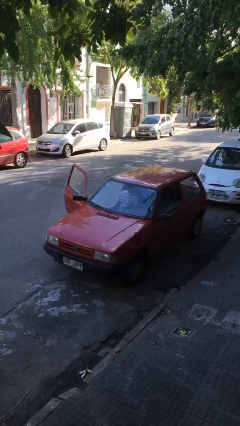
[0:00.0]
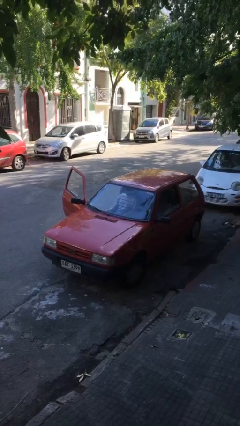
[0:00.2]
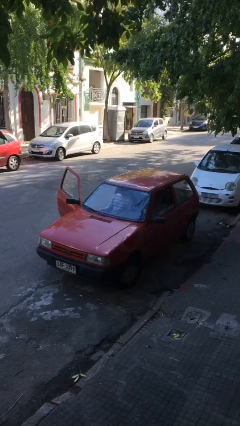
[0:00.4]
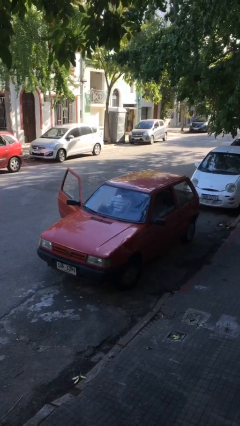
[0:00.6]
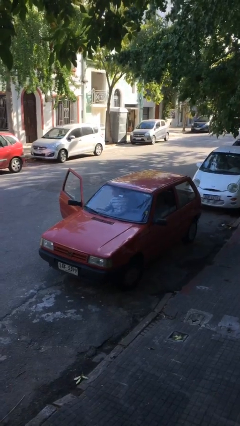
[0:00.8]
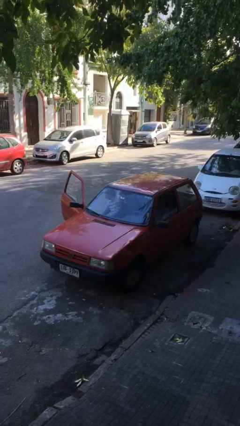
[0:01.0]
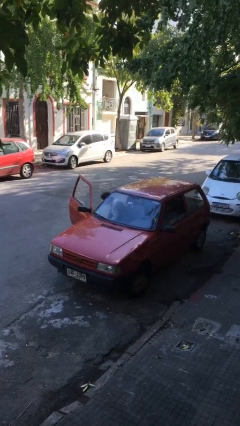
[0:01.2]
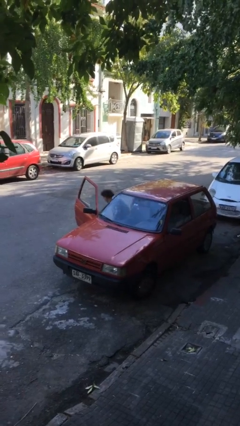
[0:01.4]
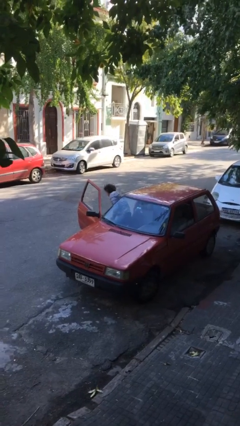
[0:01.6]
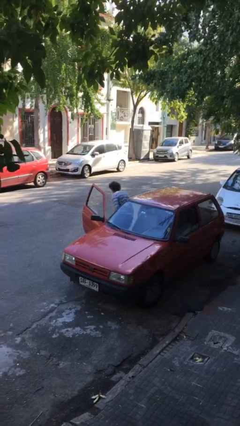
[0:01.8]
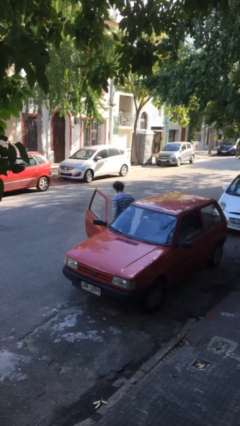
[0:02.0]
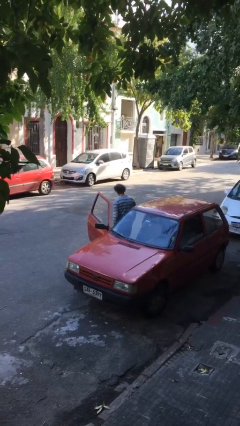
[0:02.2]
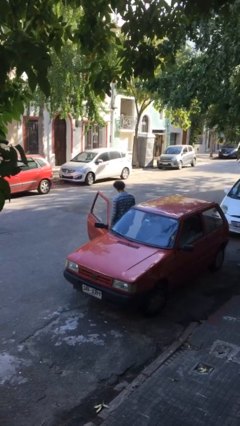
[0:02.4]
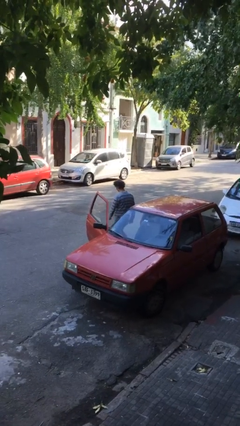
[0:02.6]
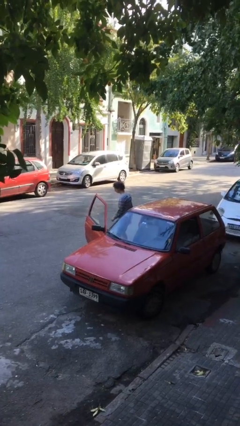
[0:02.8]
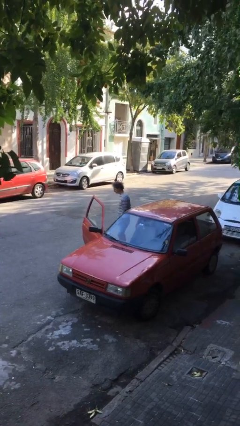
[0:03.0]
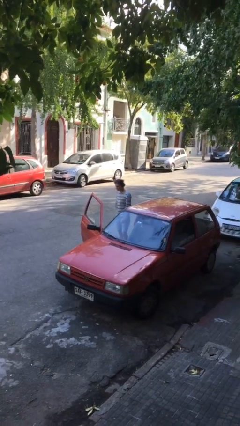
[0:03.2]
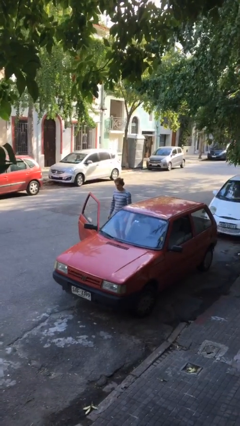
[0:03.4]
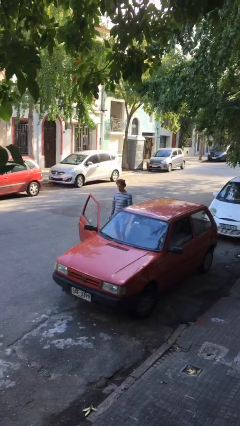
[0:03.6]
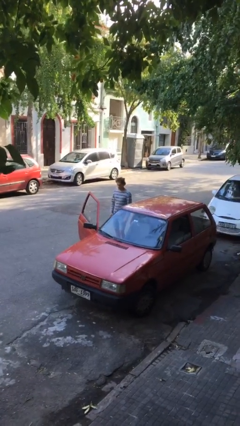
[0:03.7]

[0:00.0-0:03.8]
person exits car

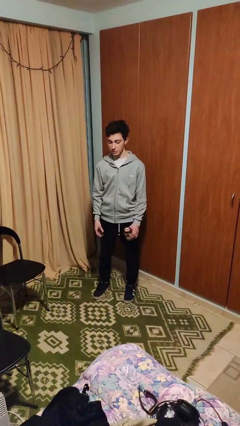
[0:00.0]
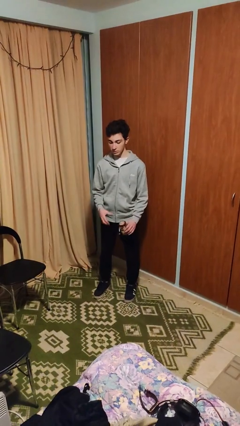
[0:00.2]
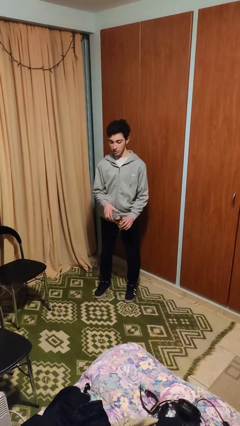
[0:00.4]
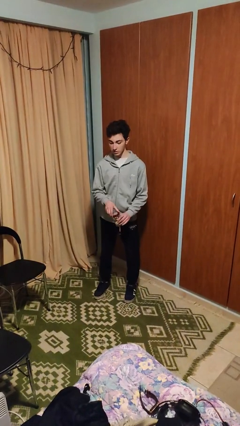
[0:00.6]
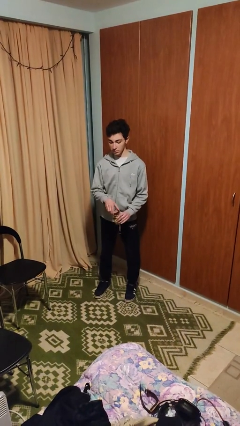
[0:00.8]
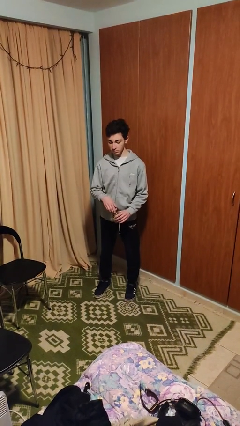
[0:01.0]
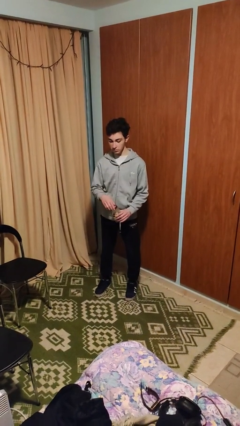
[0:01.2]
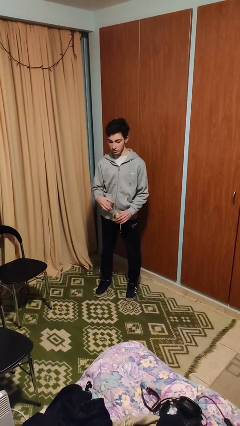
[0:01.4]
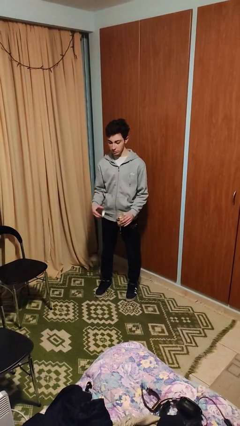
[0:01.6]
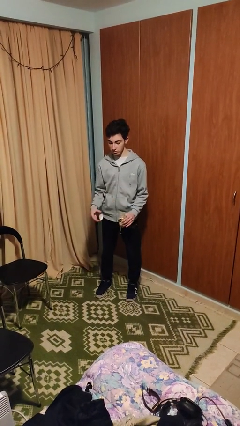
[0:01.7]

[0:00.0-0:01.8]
person opens jar

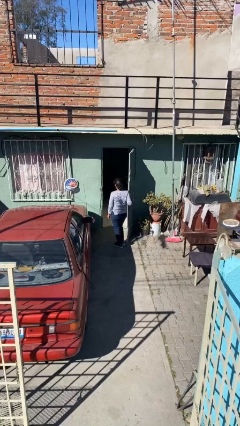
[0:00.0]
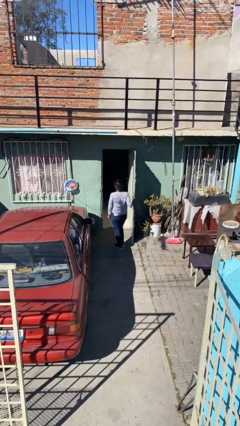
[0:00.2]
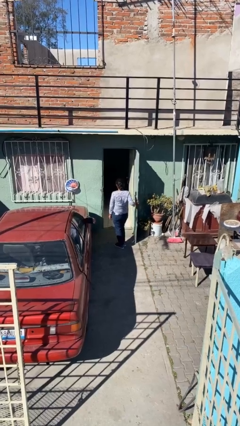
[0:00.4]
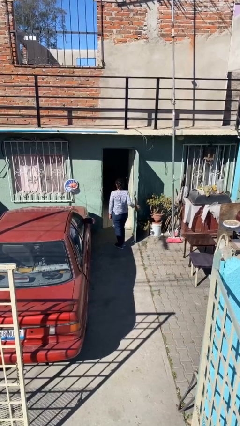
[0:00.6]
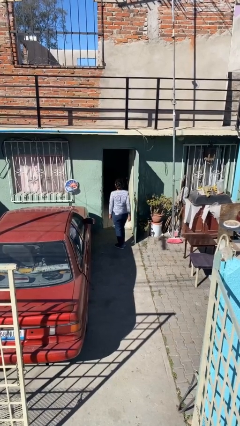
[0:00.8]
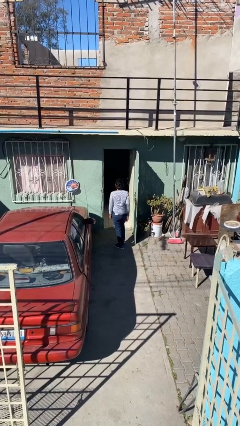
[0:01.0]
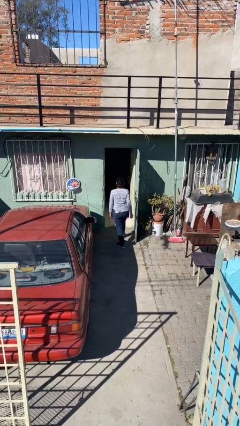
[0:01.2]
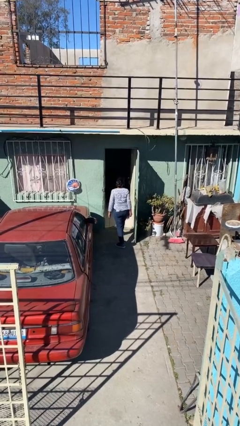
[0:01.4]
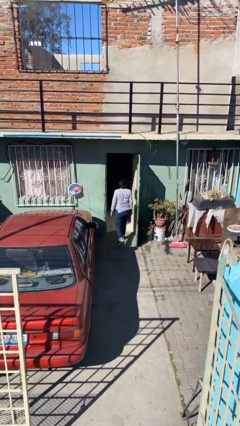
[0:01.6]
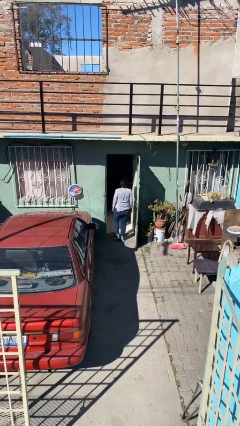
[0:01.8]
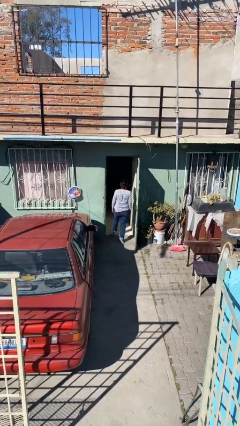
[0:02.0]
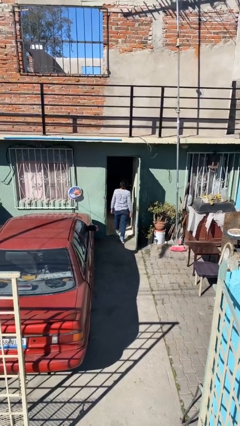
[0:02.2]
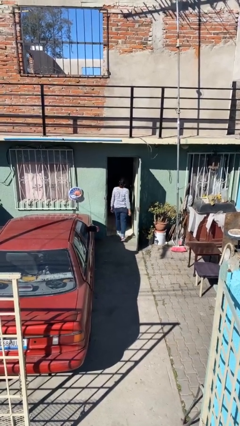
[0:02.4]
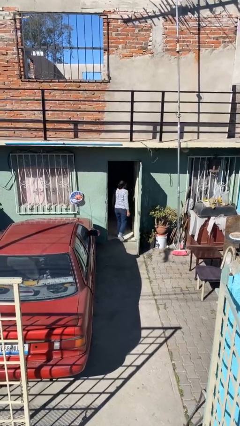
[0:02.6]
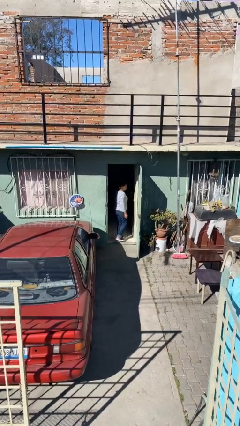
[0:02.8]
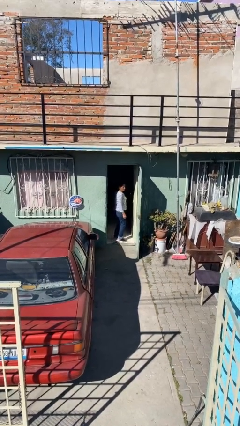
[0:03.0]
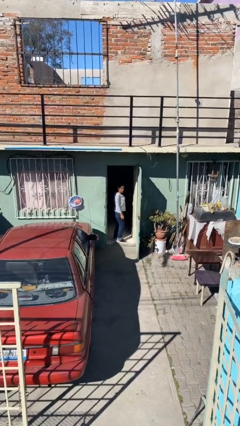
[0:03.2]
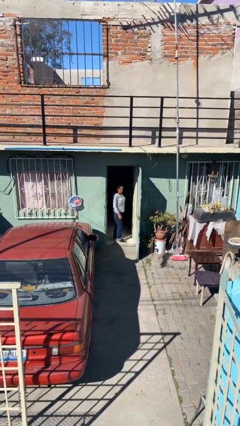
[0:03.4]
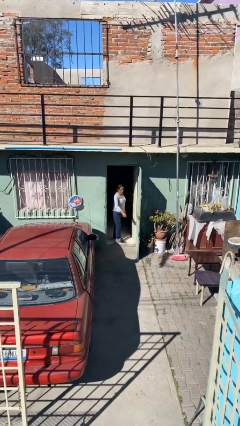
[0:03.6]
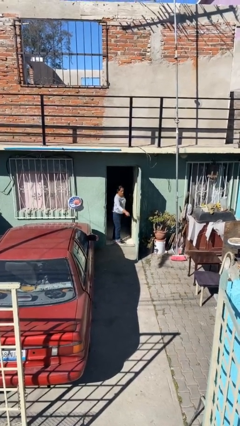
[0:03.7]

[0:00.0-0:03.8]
person exits scene through structure

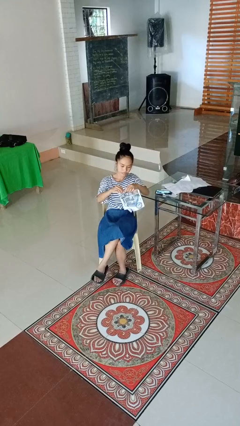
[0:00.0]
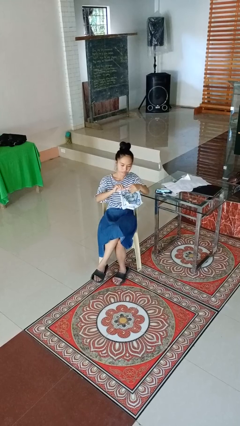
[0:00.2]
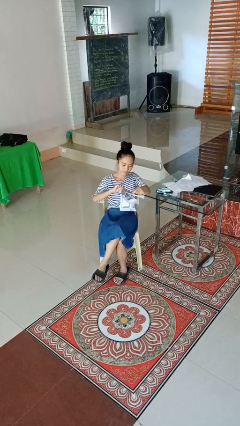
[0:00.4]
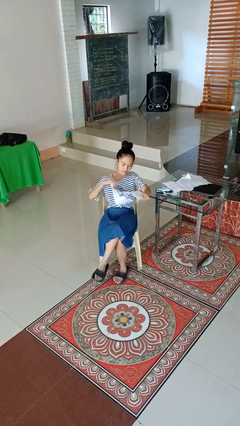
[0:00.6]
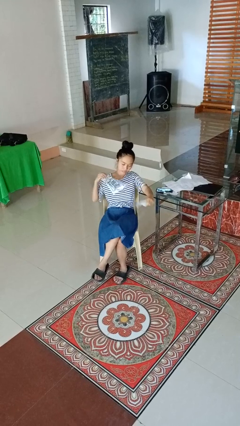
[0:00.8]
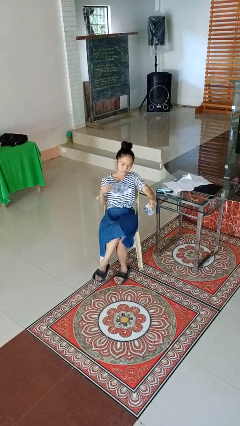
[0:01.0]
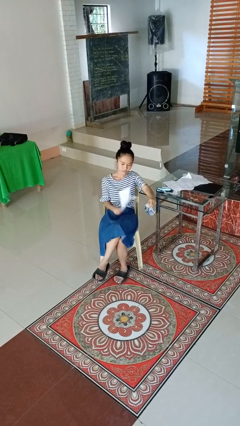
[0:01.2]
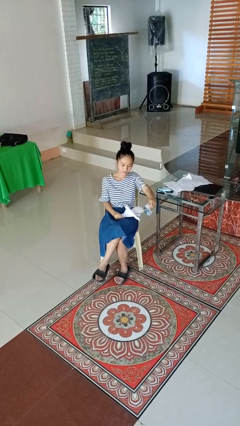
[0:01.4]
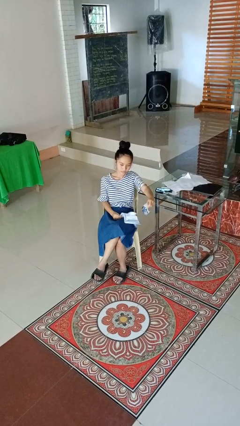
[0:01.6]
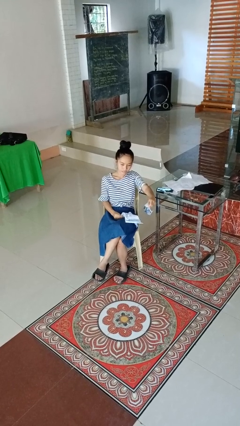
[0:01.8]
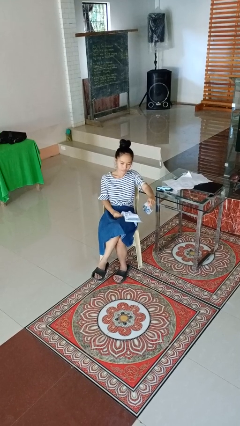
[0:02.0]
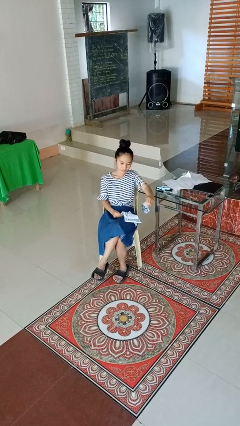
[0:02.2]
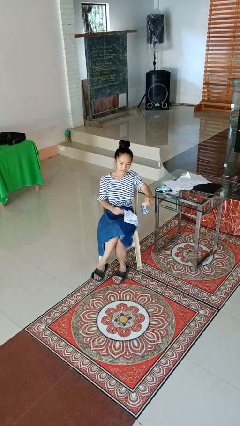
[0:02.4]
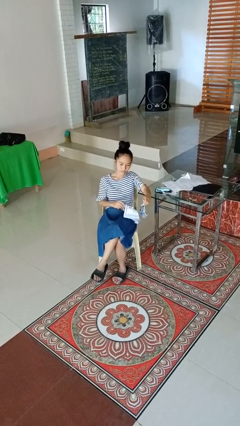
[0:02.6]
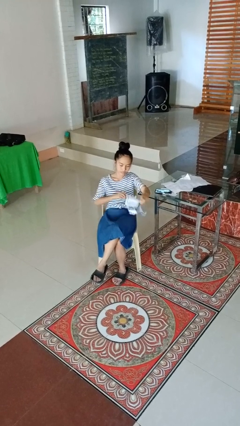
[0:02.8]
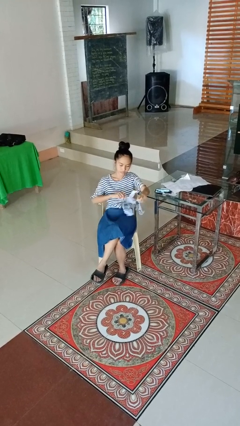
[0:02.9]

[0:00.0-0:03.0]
person tears paper

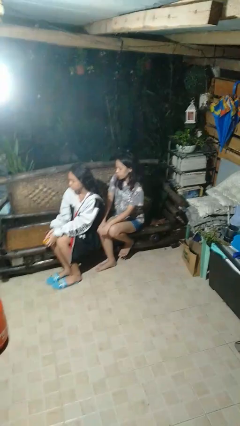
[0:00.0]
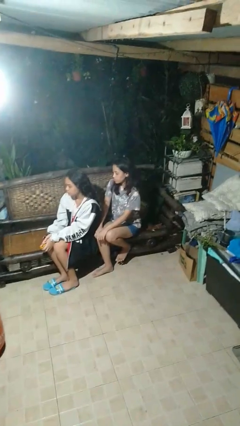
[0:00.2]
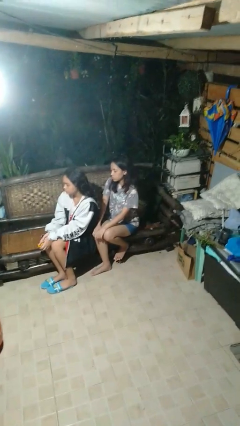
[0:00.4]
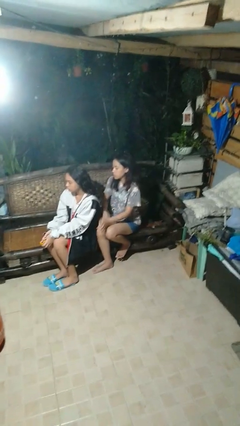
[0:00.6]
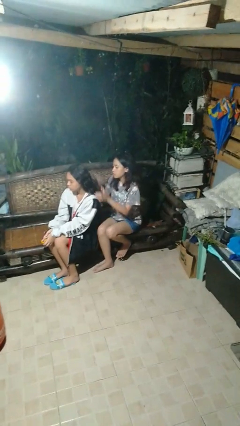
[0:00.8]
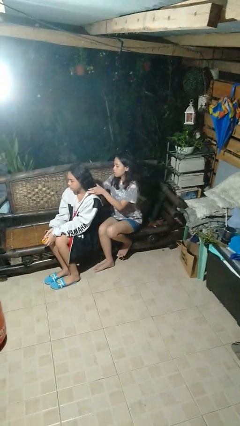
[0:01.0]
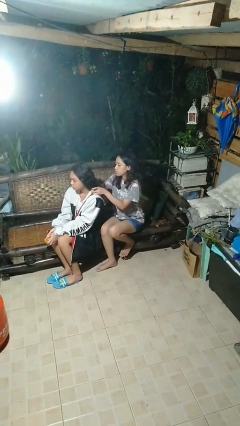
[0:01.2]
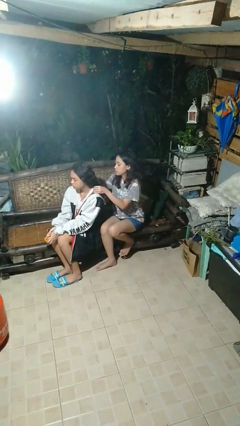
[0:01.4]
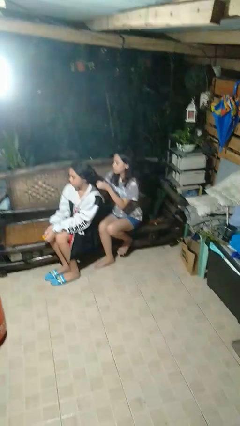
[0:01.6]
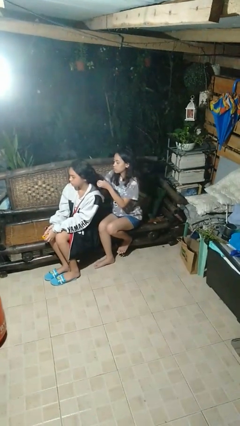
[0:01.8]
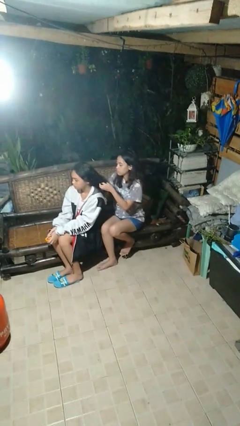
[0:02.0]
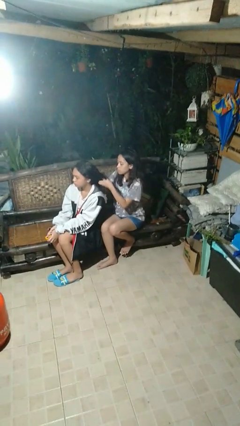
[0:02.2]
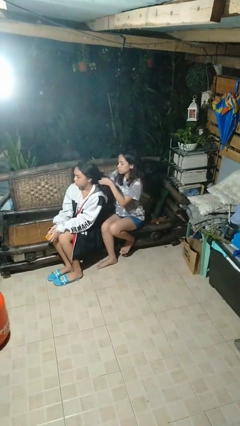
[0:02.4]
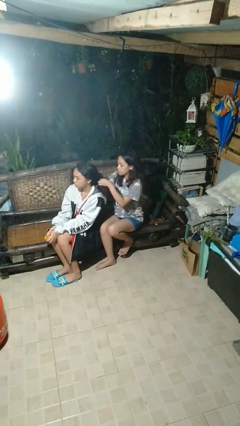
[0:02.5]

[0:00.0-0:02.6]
person braids hair of person

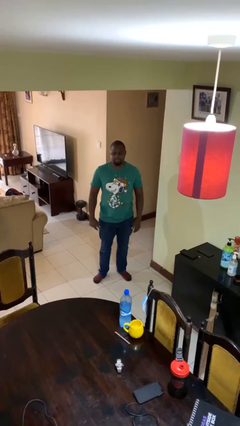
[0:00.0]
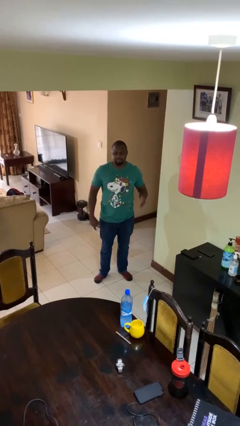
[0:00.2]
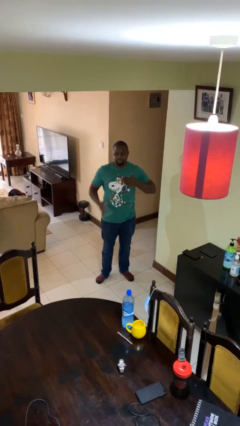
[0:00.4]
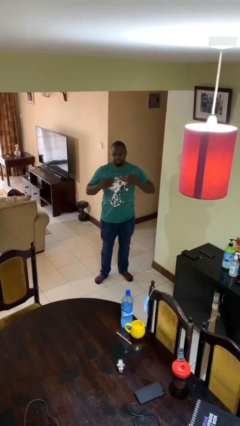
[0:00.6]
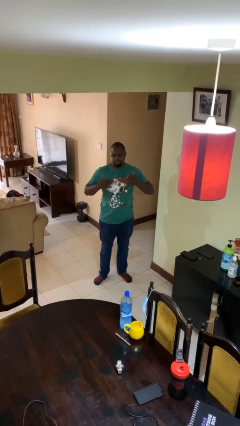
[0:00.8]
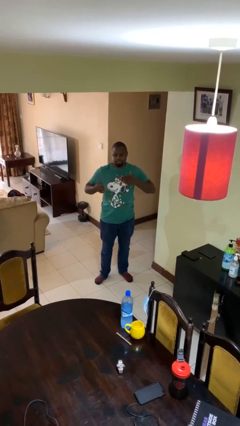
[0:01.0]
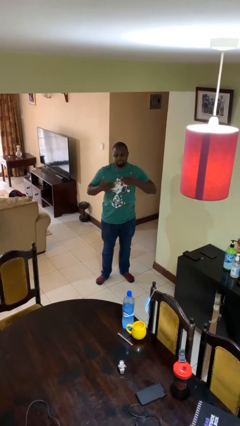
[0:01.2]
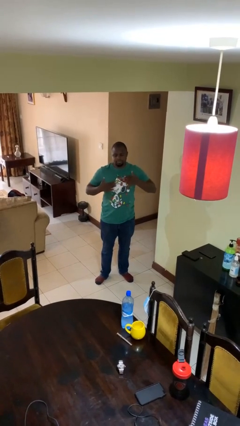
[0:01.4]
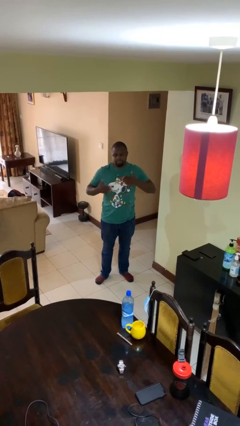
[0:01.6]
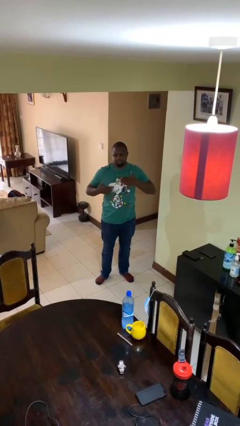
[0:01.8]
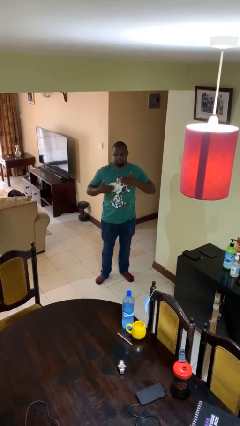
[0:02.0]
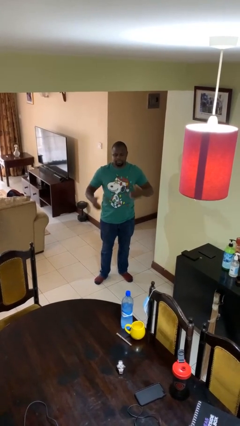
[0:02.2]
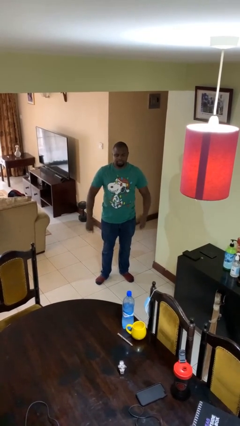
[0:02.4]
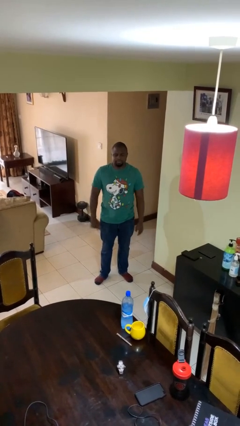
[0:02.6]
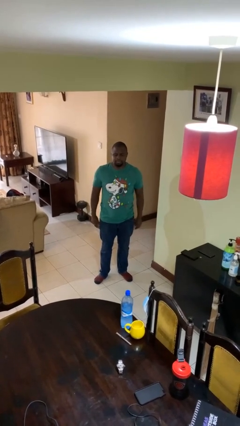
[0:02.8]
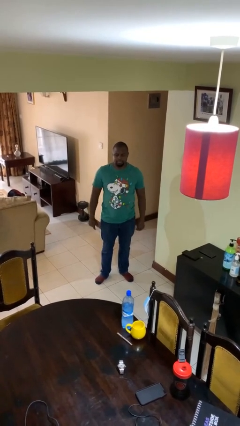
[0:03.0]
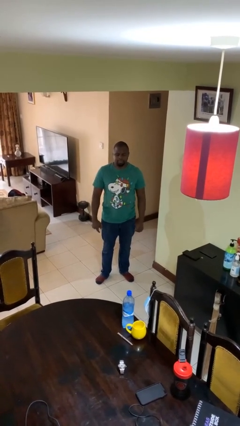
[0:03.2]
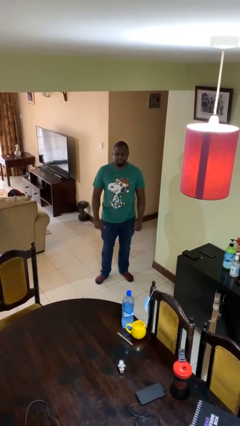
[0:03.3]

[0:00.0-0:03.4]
person drums on chest
